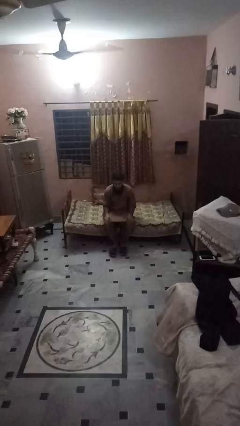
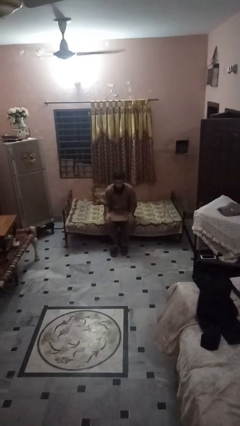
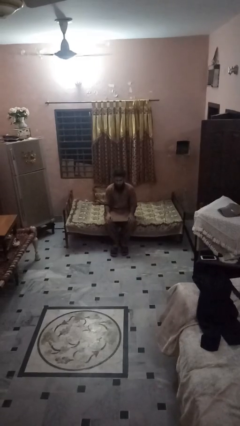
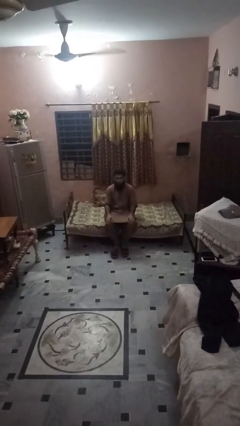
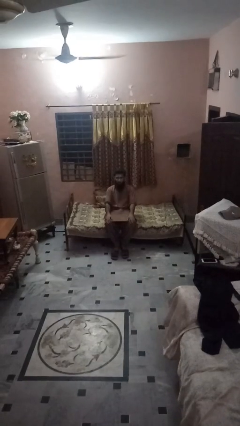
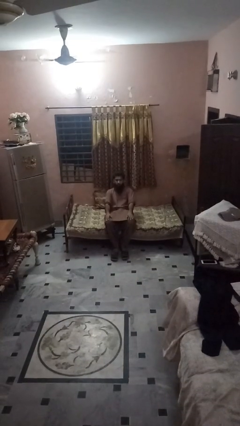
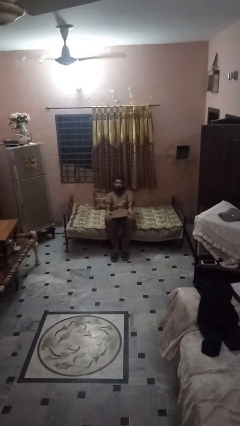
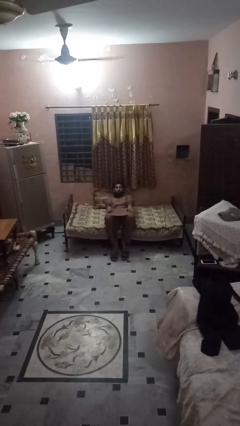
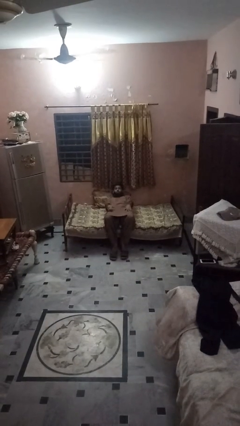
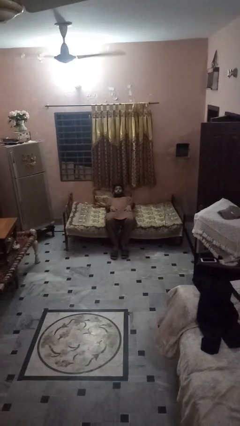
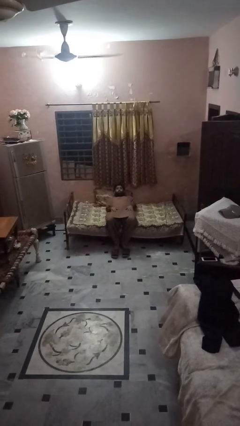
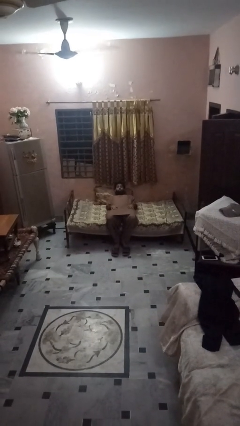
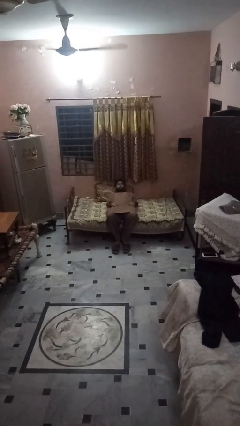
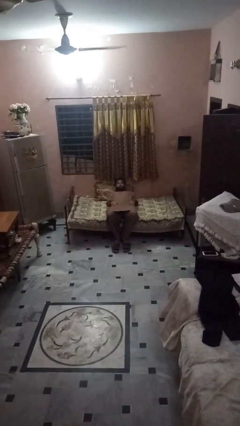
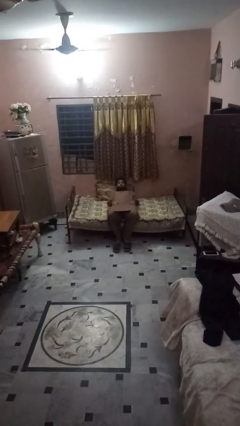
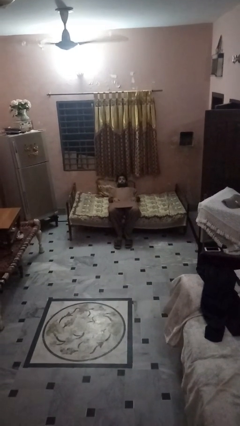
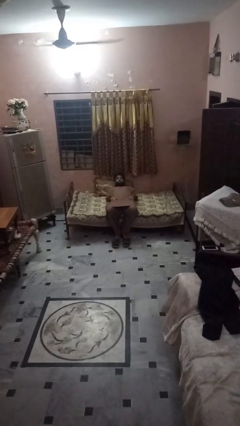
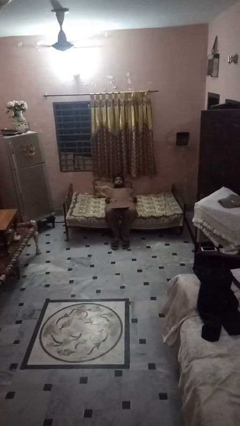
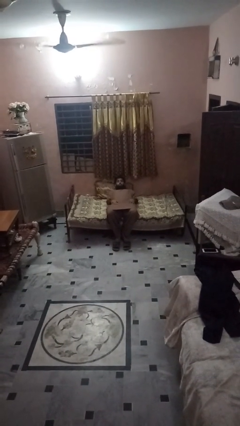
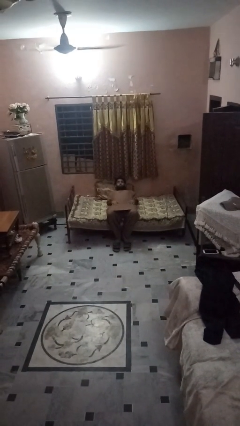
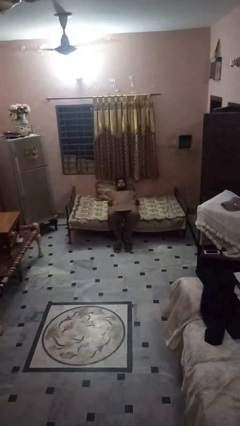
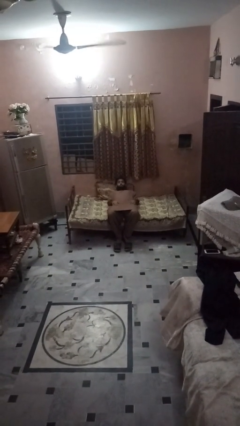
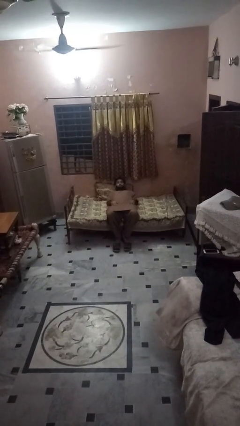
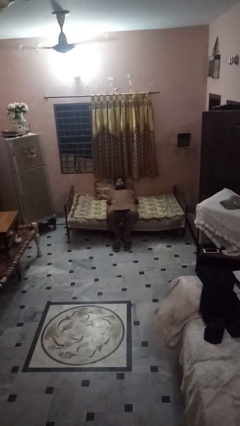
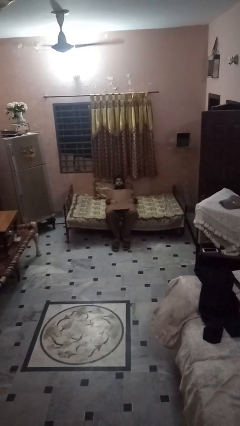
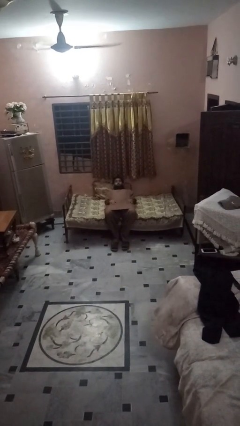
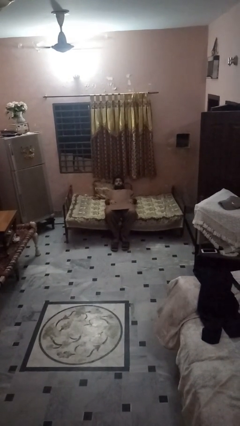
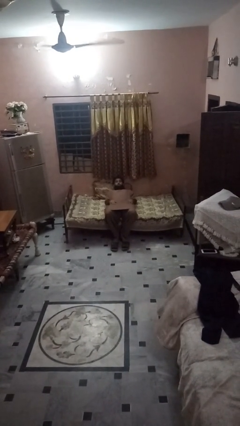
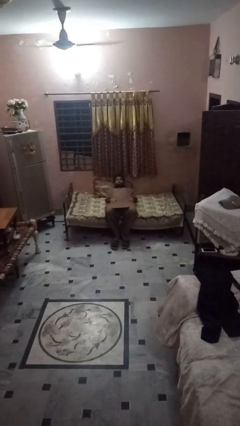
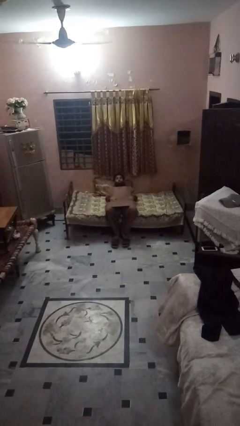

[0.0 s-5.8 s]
person lies down on bed

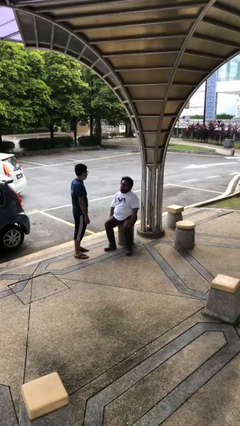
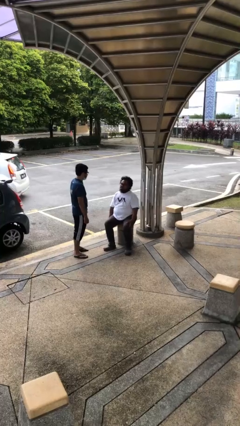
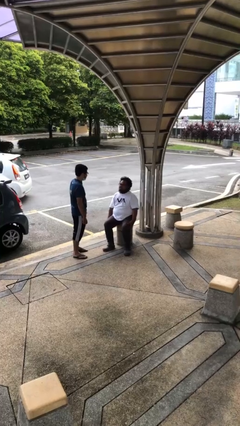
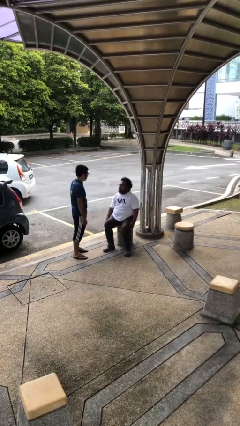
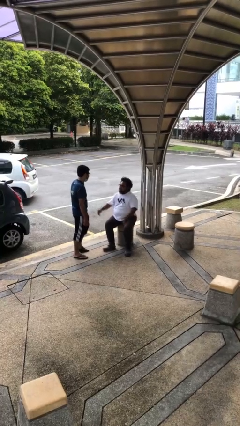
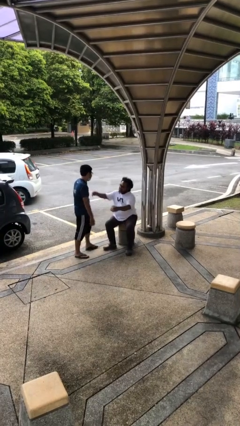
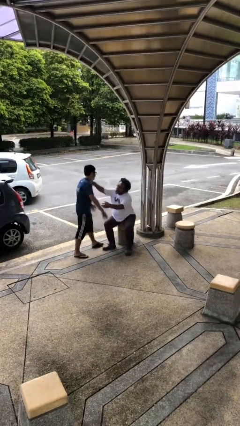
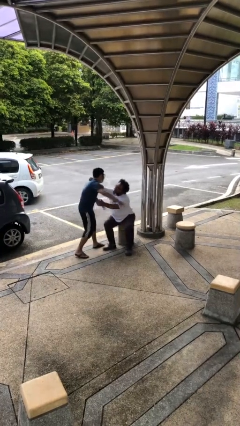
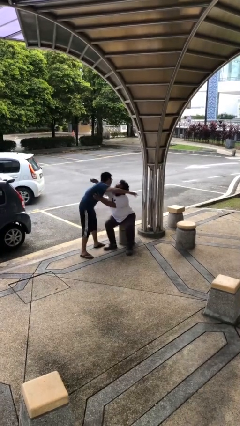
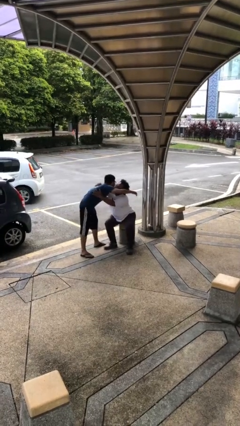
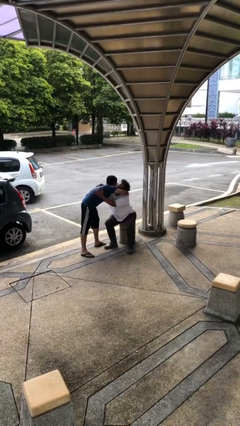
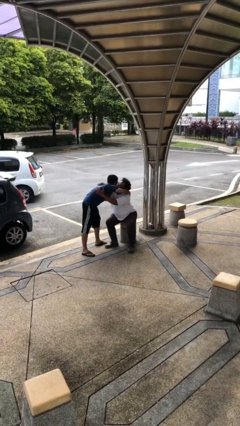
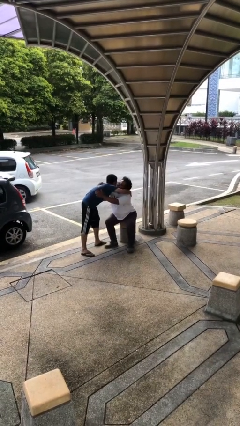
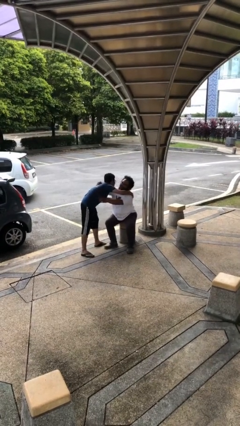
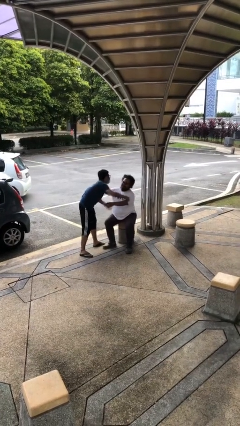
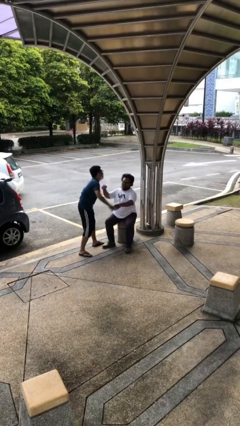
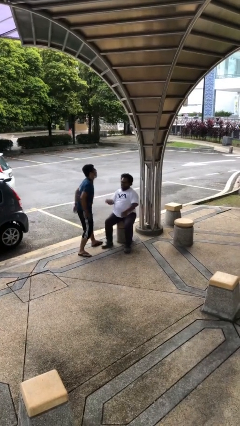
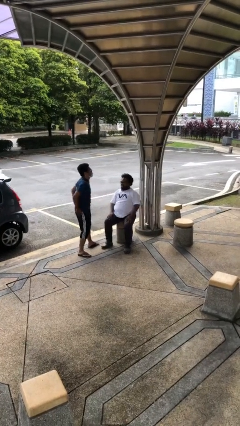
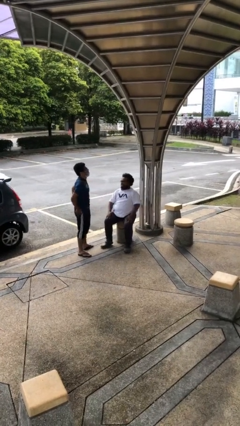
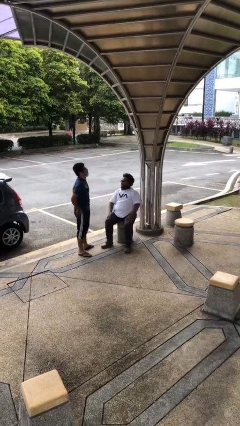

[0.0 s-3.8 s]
person embraces person

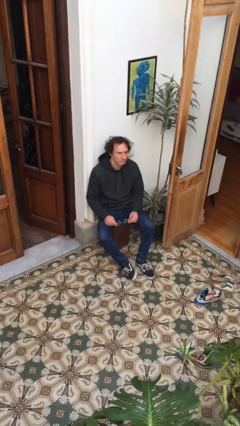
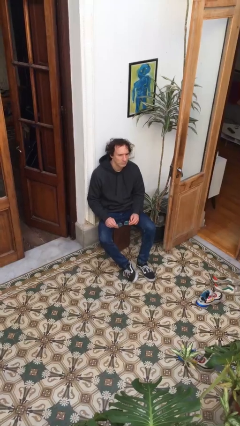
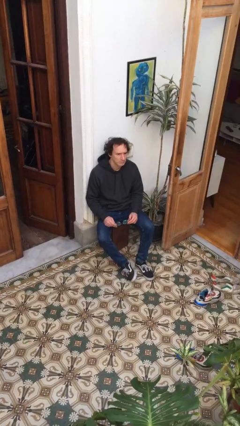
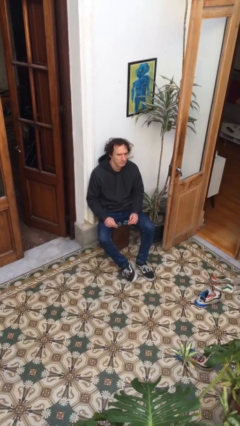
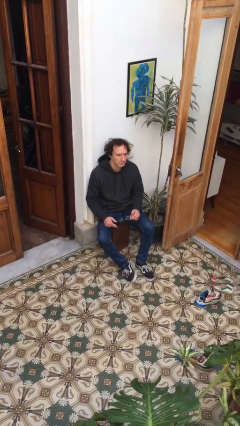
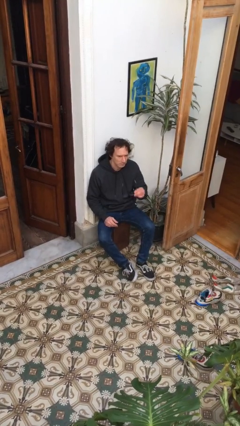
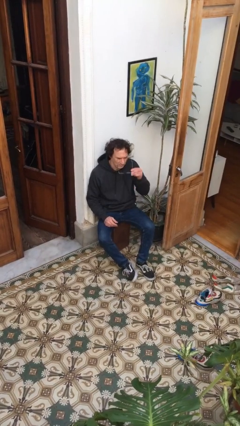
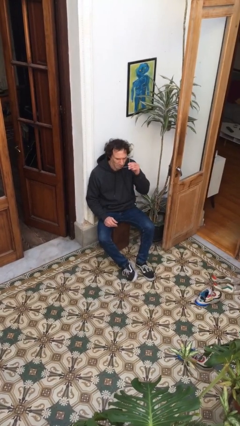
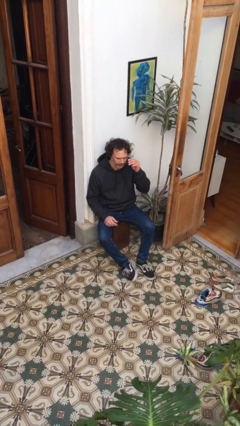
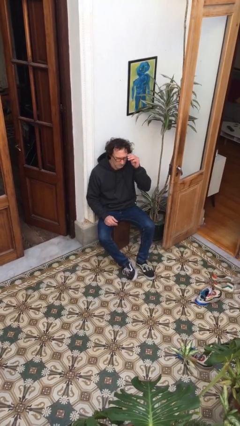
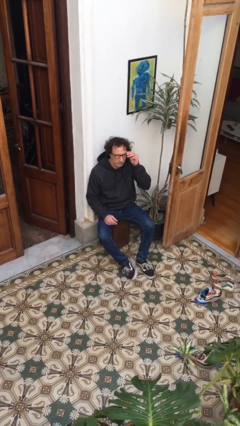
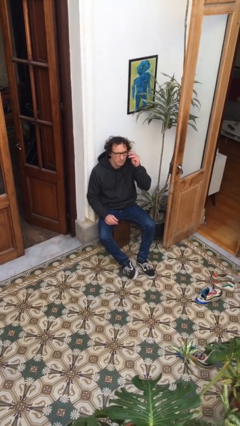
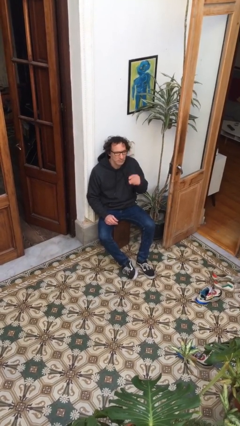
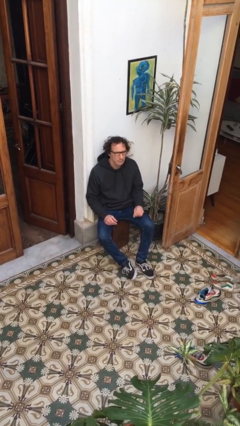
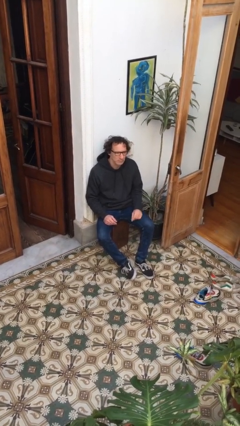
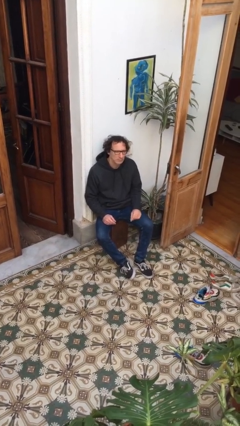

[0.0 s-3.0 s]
person puts on glasses

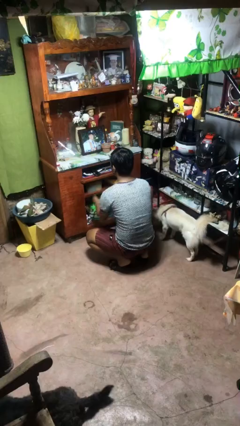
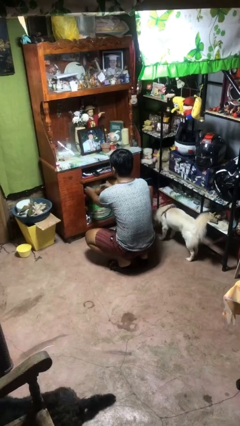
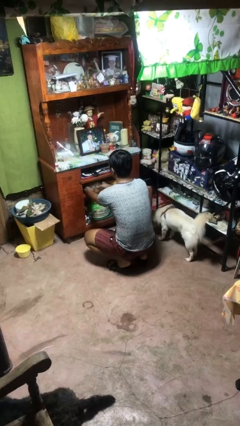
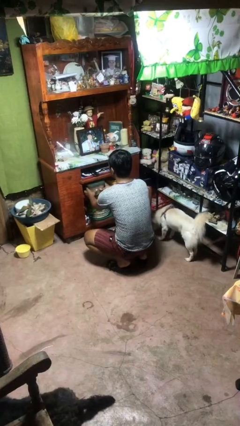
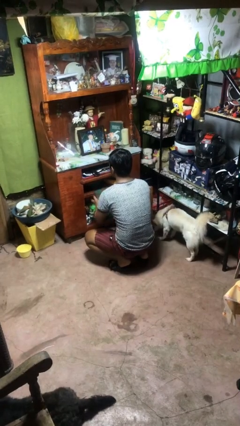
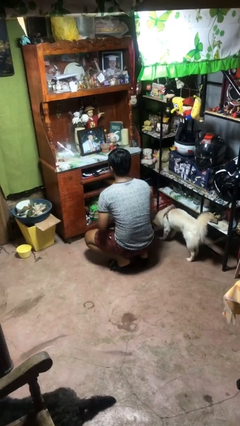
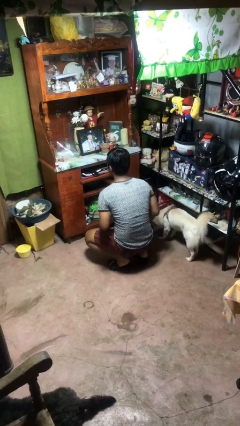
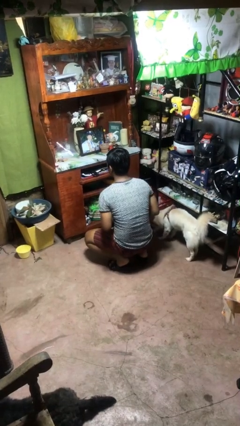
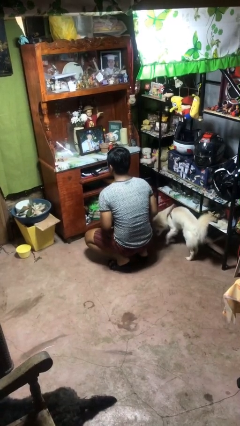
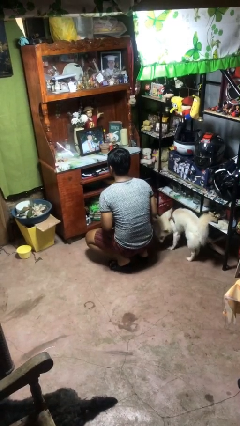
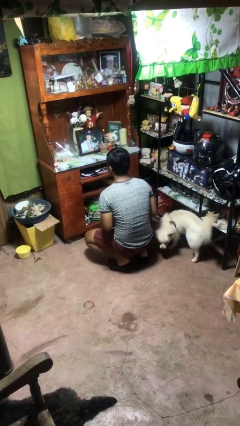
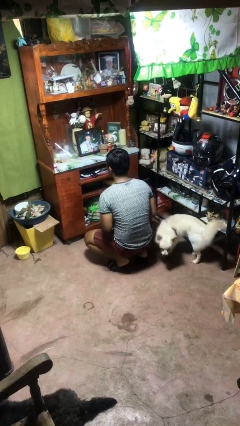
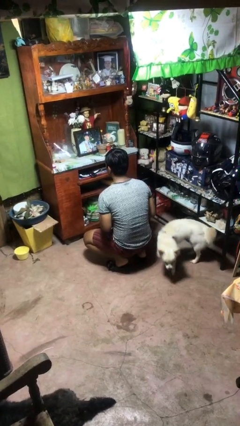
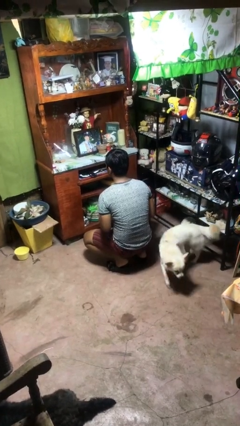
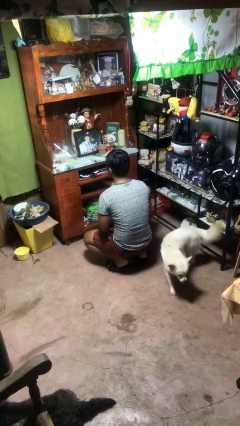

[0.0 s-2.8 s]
person picks up object from cabinet

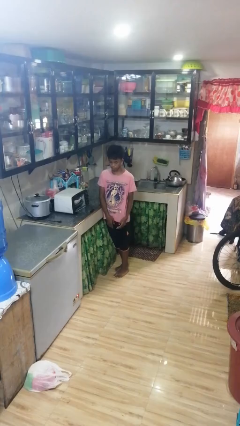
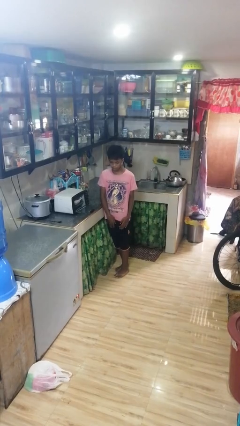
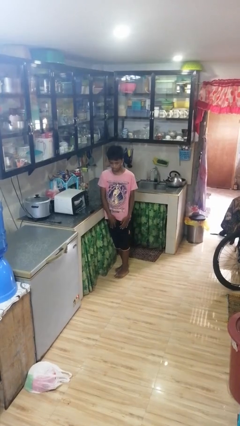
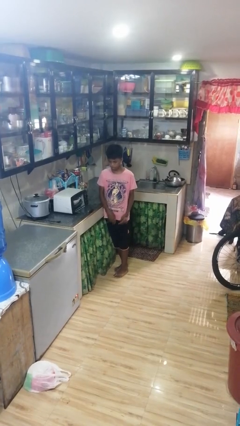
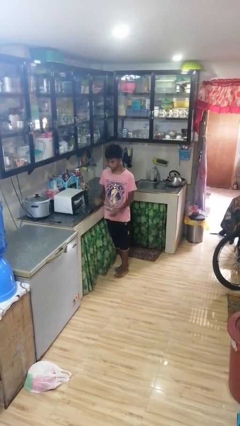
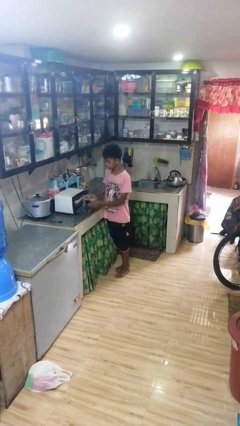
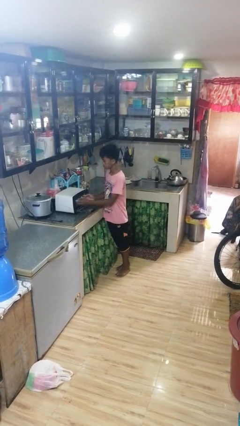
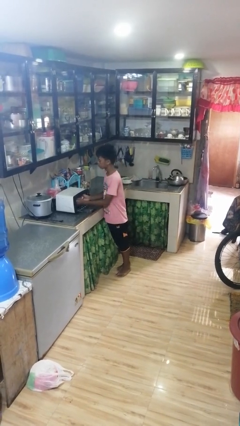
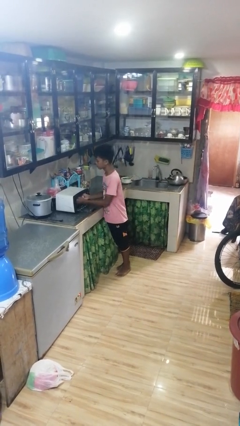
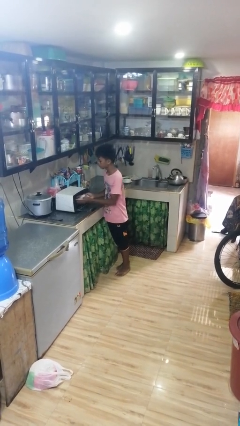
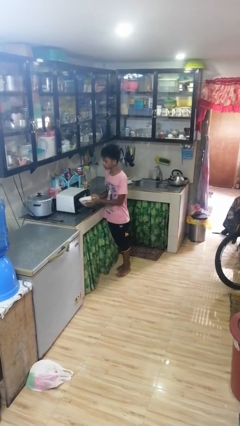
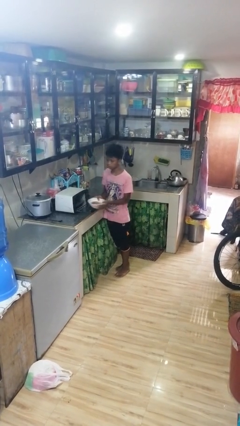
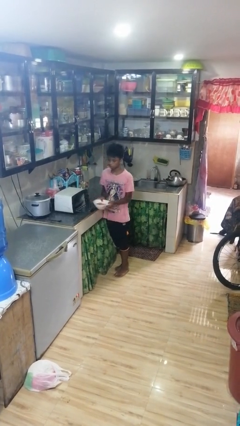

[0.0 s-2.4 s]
person takes object from microwave
